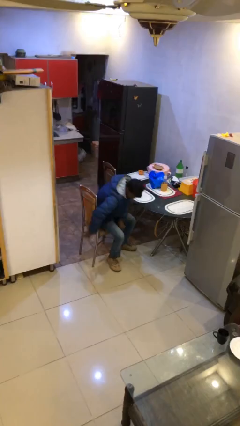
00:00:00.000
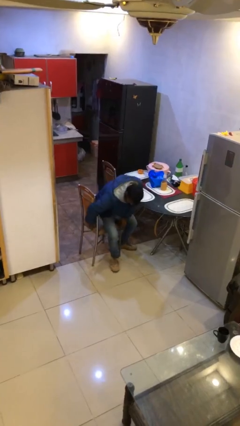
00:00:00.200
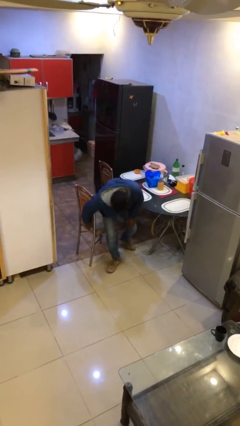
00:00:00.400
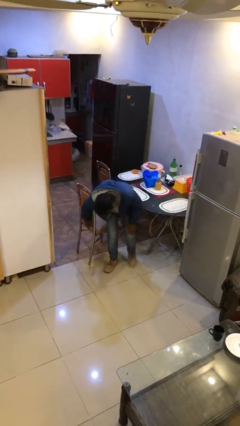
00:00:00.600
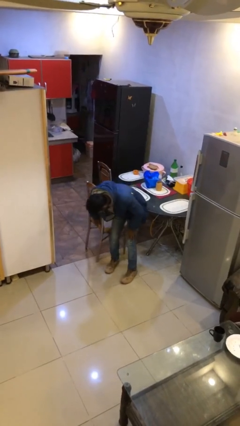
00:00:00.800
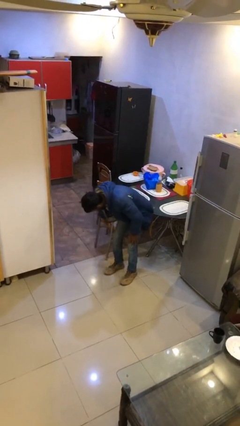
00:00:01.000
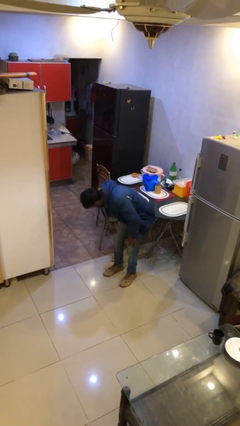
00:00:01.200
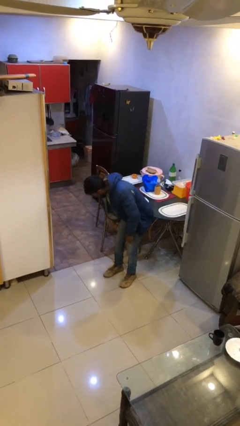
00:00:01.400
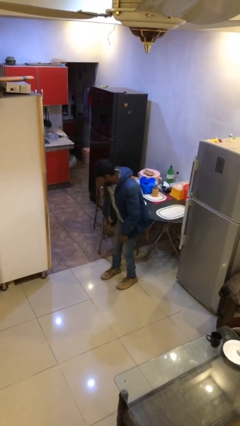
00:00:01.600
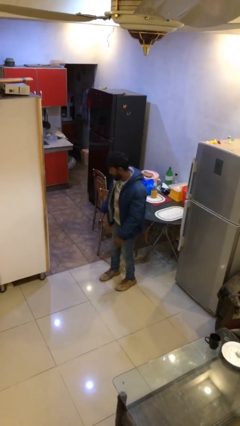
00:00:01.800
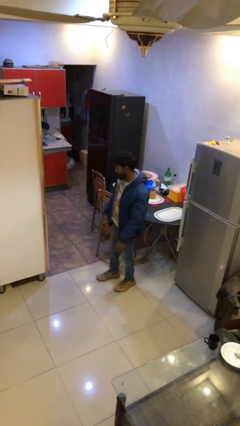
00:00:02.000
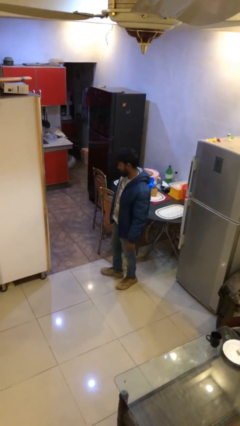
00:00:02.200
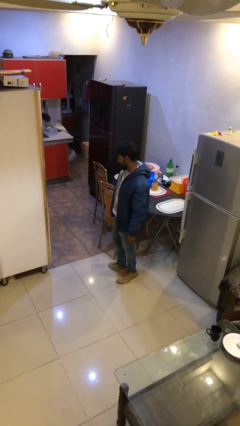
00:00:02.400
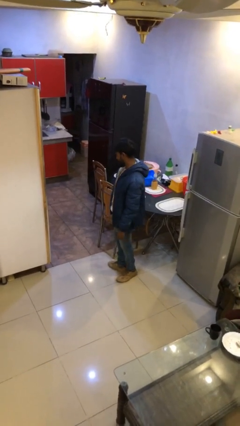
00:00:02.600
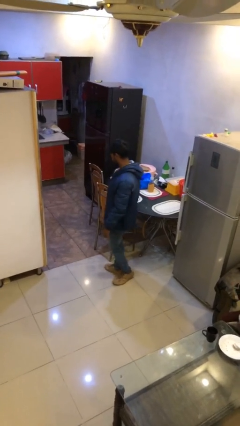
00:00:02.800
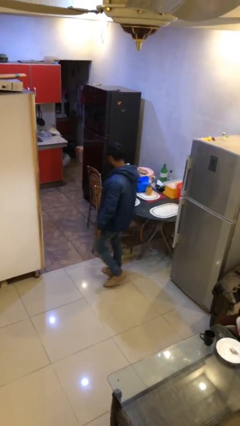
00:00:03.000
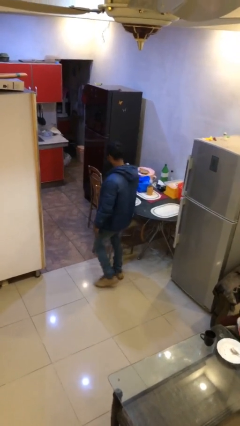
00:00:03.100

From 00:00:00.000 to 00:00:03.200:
person stands up

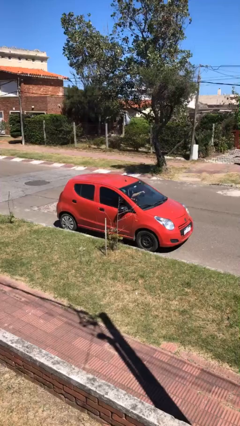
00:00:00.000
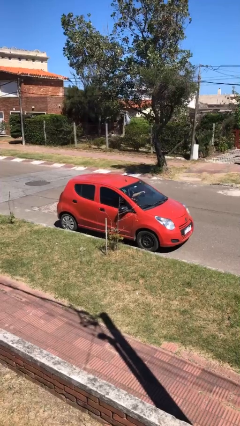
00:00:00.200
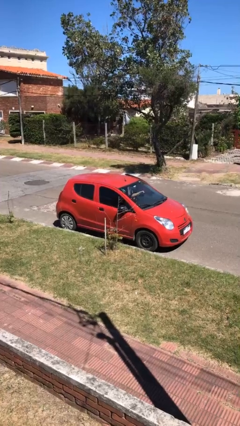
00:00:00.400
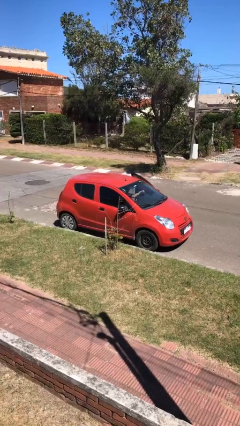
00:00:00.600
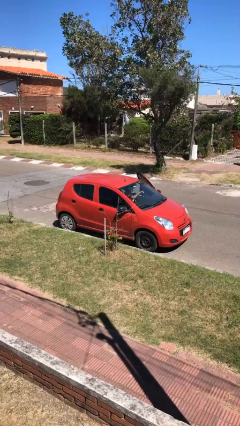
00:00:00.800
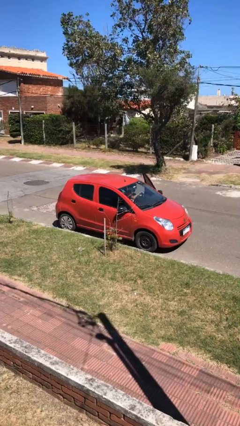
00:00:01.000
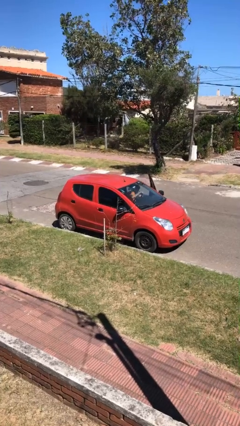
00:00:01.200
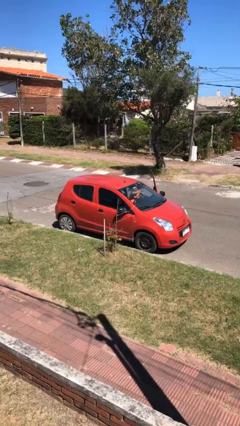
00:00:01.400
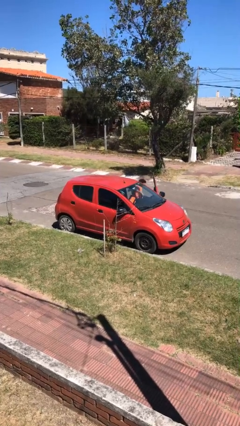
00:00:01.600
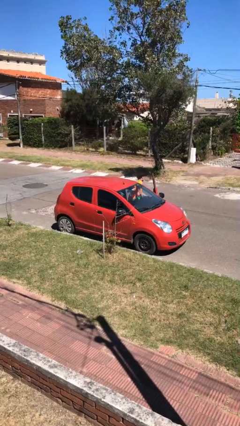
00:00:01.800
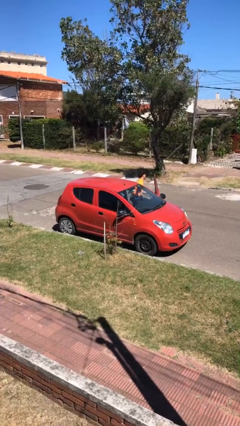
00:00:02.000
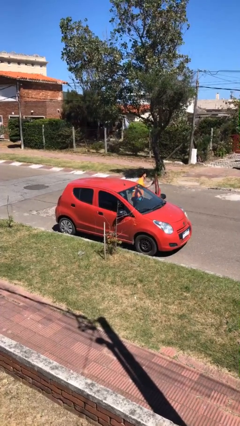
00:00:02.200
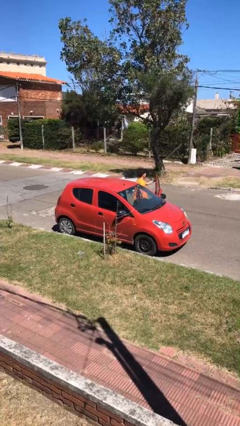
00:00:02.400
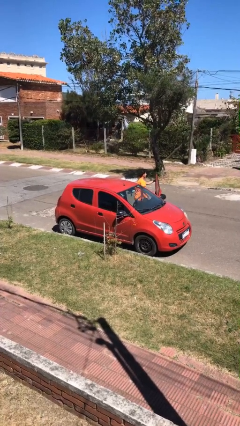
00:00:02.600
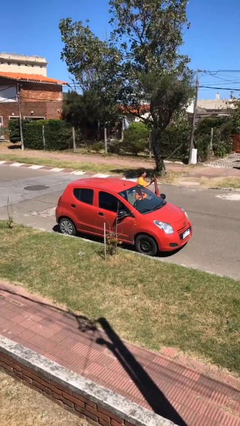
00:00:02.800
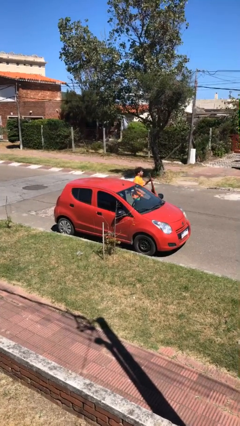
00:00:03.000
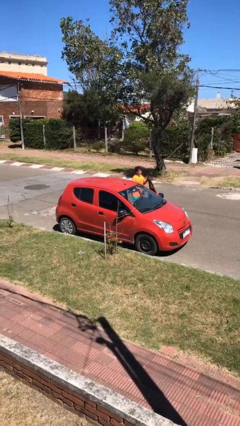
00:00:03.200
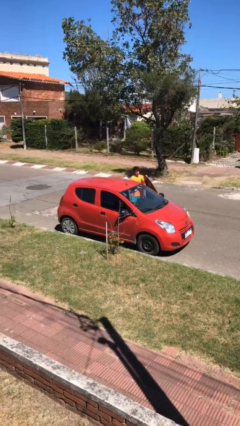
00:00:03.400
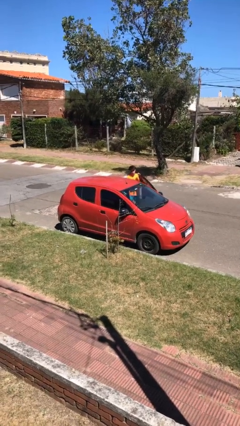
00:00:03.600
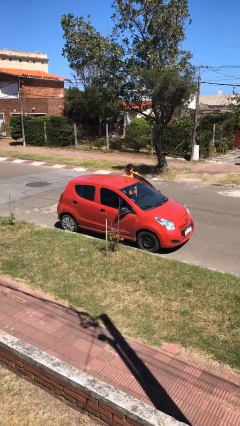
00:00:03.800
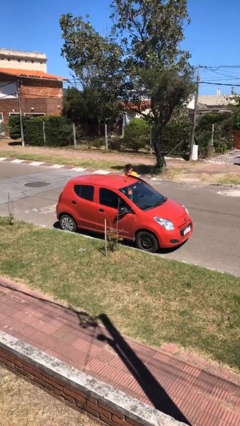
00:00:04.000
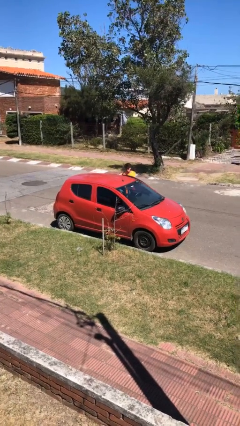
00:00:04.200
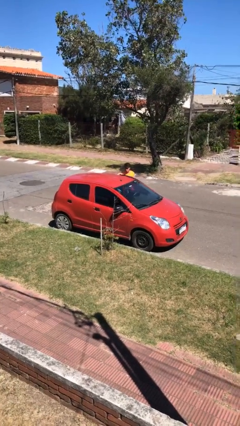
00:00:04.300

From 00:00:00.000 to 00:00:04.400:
car drops off person

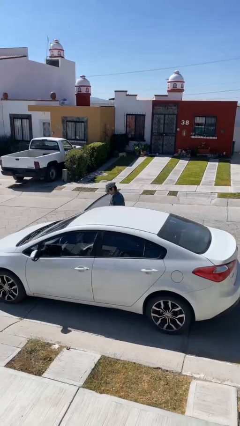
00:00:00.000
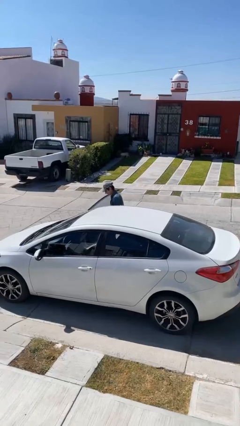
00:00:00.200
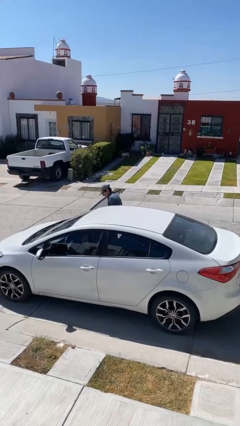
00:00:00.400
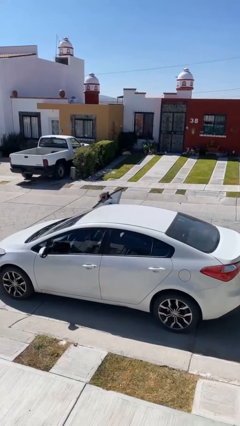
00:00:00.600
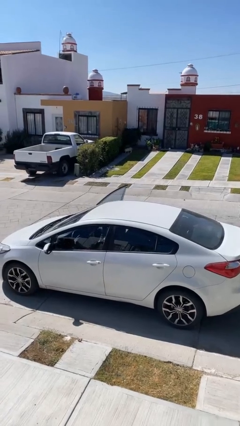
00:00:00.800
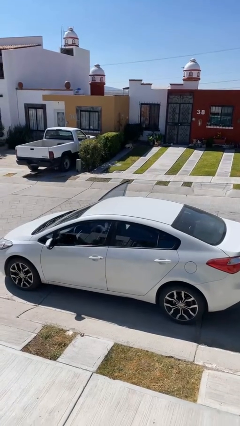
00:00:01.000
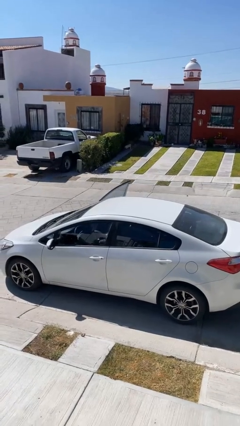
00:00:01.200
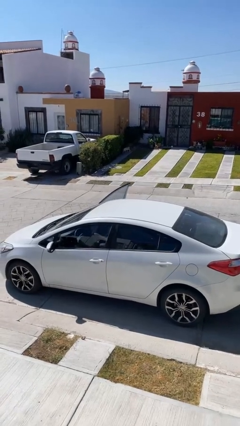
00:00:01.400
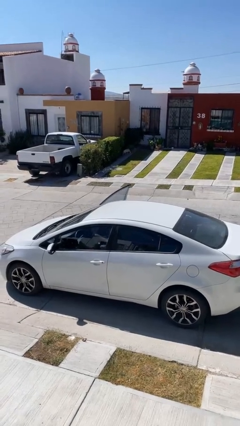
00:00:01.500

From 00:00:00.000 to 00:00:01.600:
person enters car

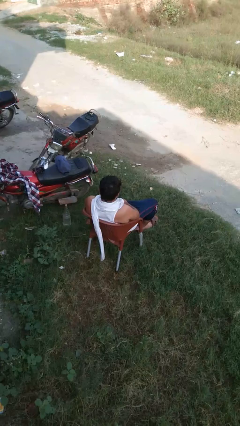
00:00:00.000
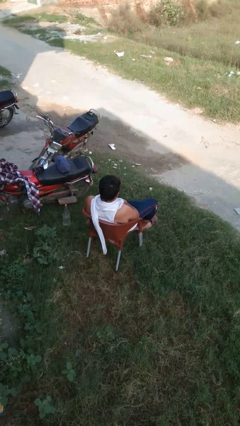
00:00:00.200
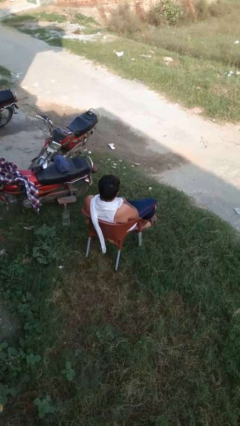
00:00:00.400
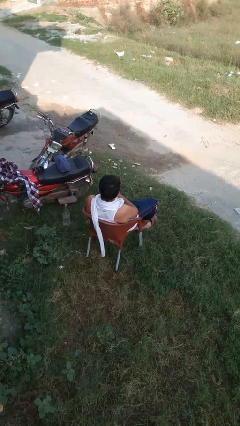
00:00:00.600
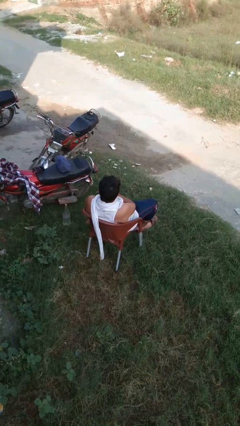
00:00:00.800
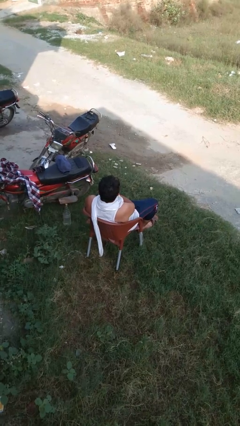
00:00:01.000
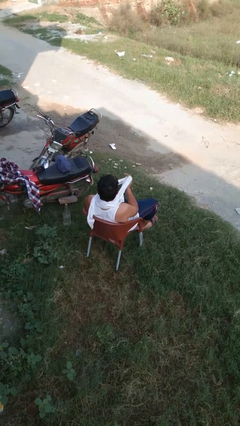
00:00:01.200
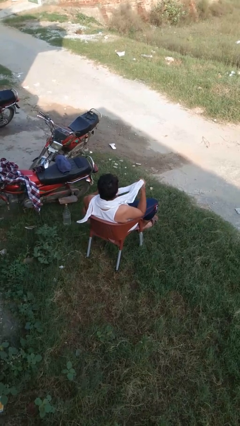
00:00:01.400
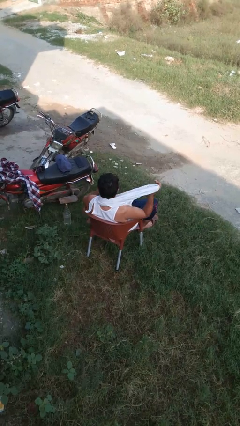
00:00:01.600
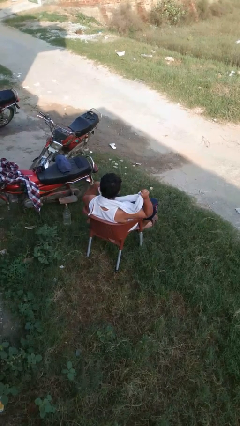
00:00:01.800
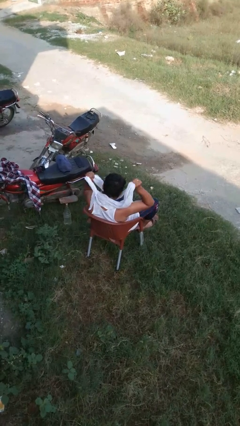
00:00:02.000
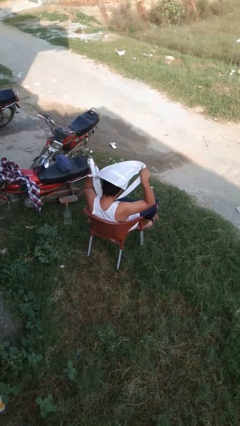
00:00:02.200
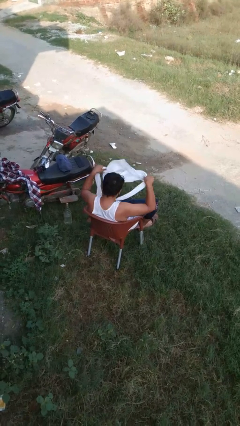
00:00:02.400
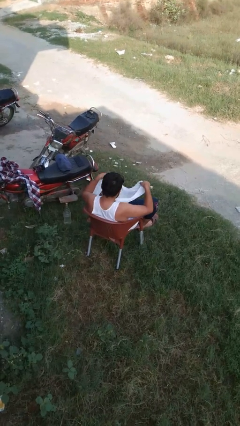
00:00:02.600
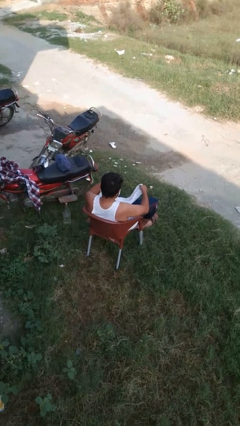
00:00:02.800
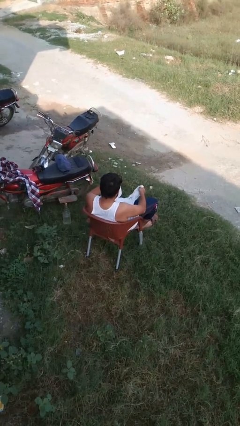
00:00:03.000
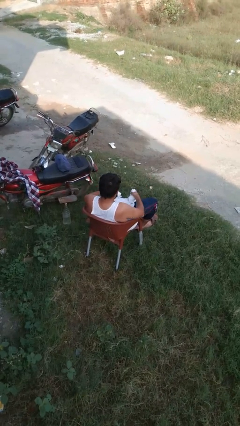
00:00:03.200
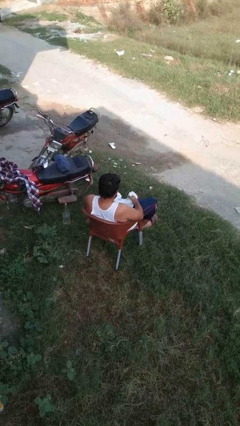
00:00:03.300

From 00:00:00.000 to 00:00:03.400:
person takes off scarf

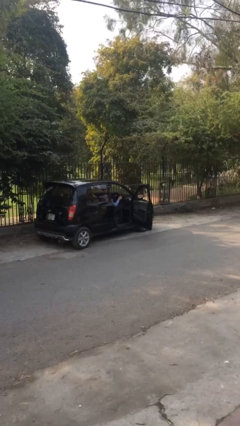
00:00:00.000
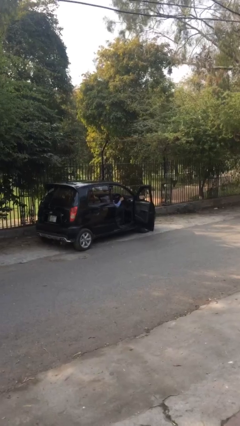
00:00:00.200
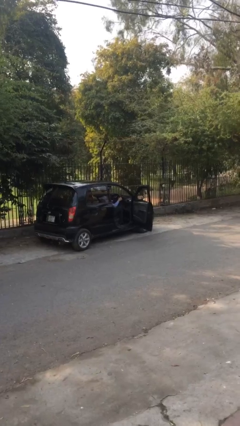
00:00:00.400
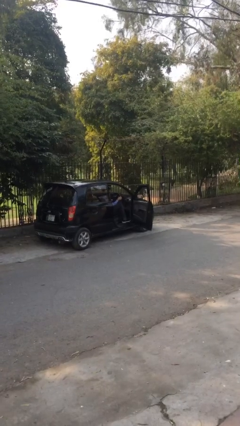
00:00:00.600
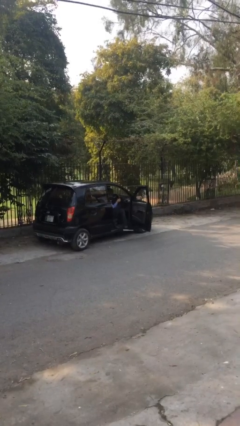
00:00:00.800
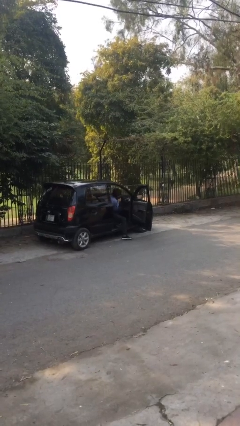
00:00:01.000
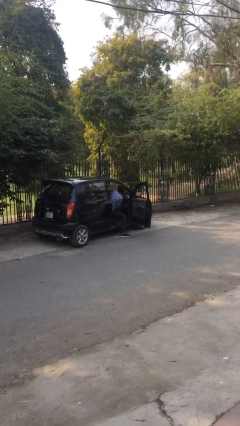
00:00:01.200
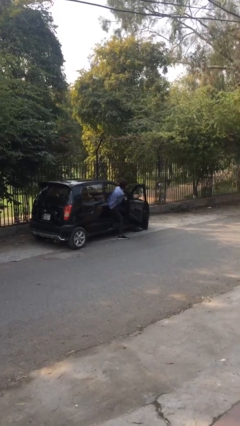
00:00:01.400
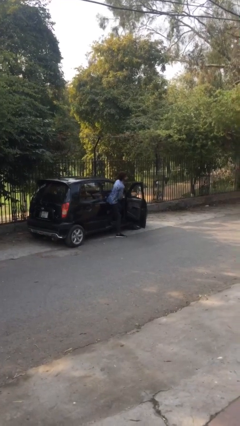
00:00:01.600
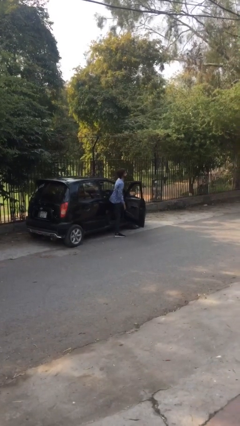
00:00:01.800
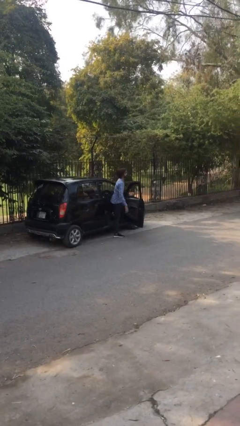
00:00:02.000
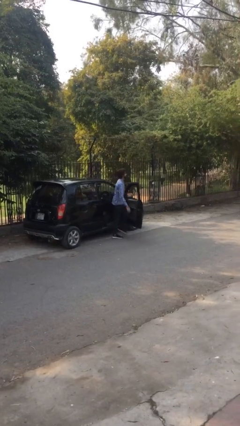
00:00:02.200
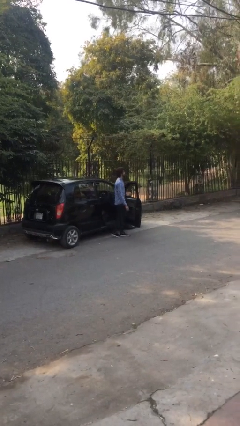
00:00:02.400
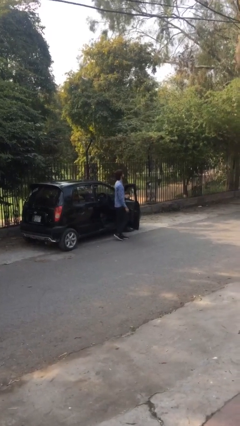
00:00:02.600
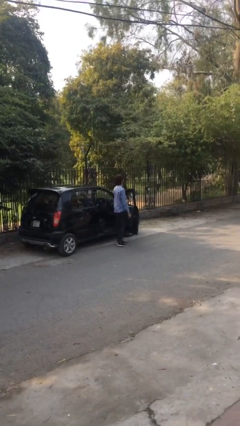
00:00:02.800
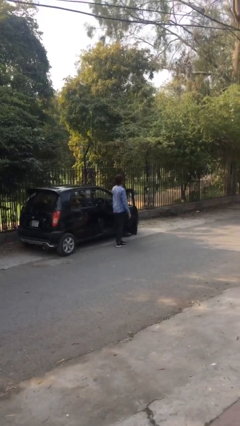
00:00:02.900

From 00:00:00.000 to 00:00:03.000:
person exits car

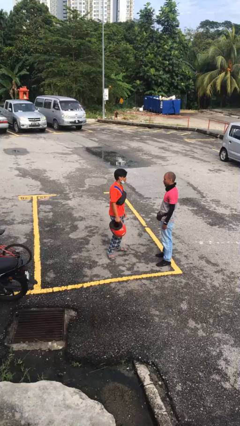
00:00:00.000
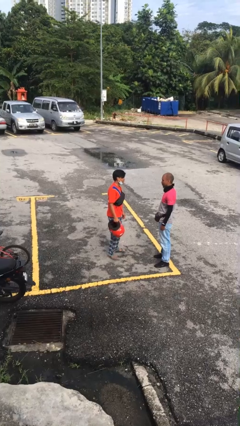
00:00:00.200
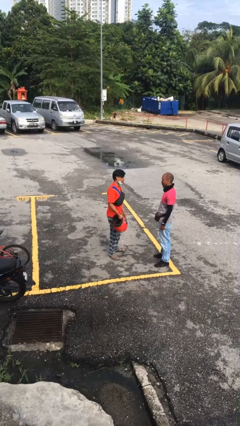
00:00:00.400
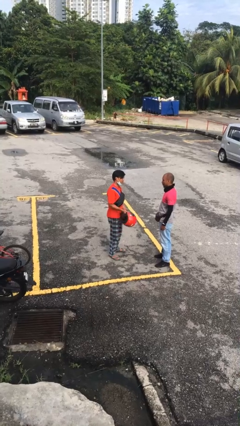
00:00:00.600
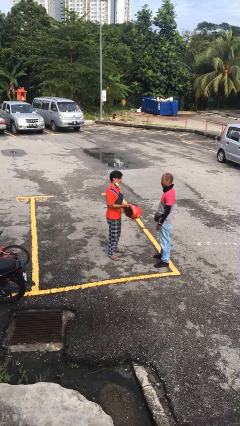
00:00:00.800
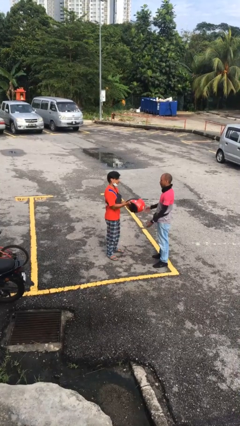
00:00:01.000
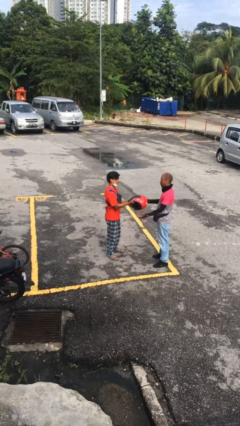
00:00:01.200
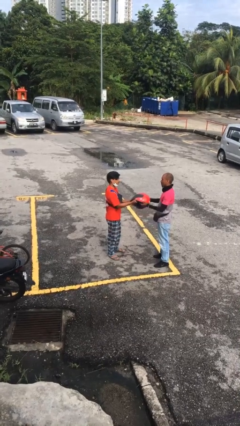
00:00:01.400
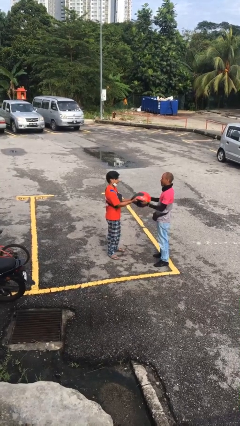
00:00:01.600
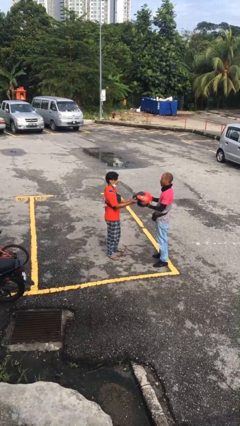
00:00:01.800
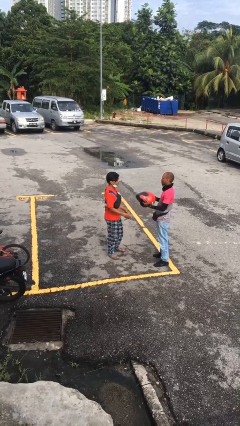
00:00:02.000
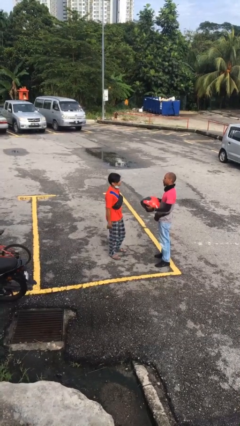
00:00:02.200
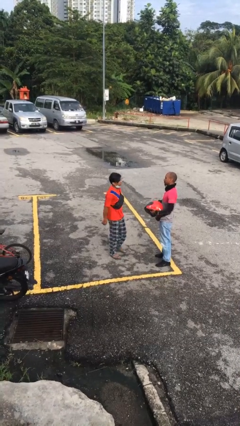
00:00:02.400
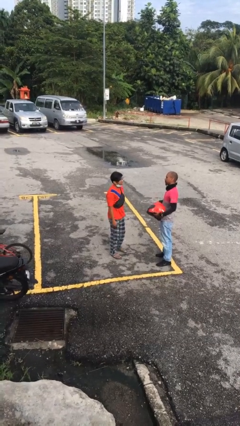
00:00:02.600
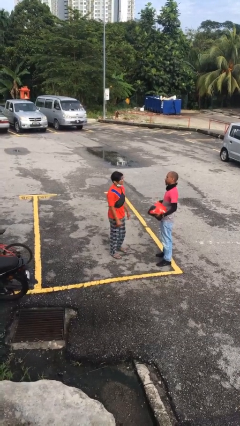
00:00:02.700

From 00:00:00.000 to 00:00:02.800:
person transfers object to person
